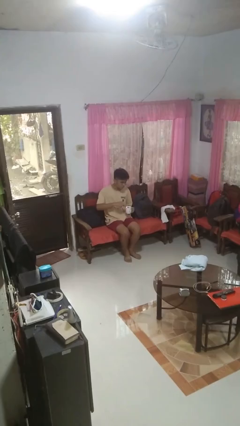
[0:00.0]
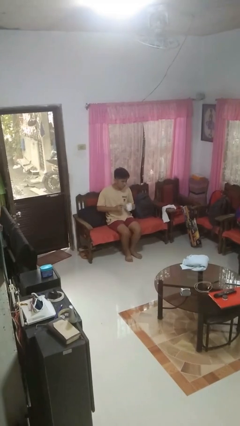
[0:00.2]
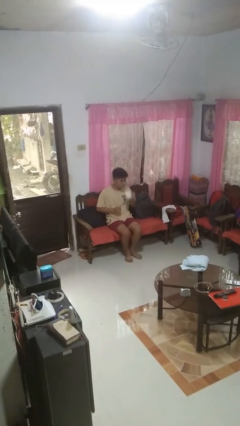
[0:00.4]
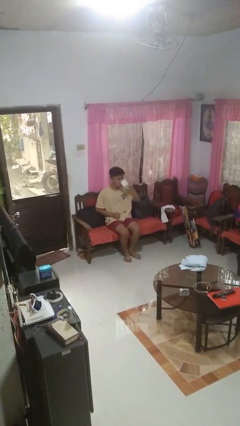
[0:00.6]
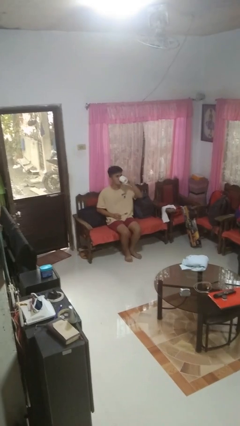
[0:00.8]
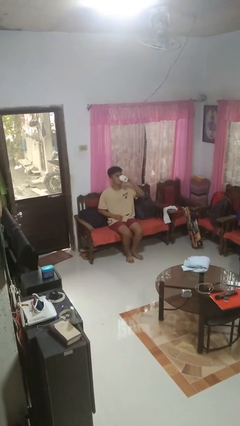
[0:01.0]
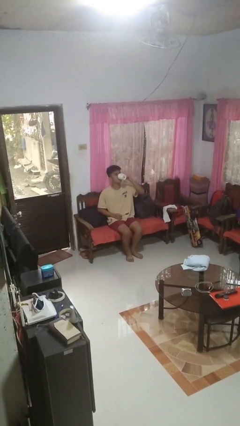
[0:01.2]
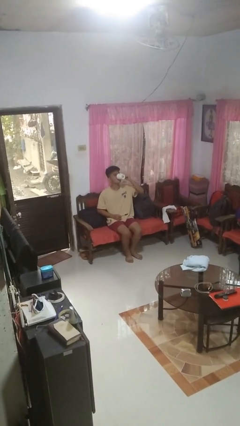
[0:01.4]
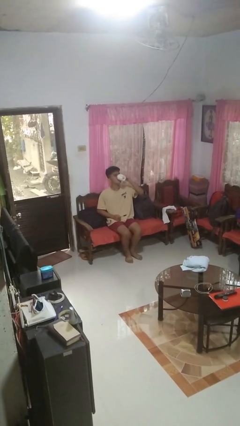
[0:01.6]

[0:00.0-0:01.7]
person drinks from mug

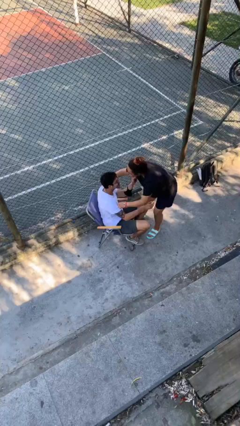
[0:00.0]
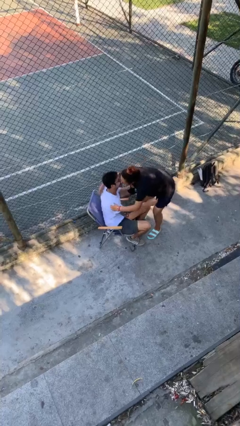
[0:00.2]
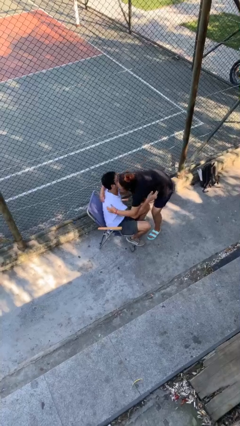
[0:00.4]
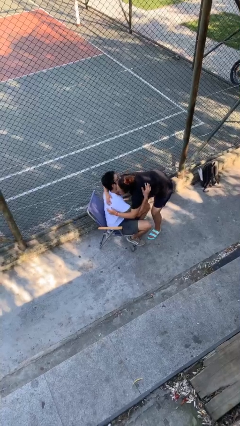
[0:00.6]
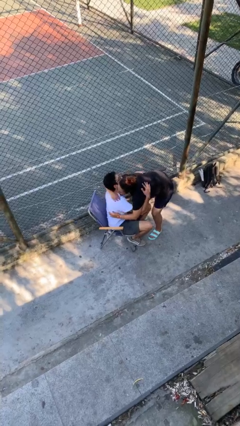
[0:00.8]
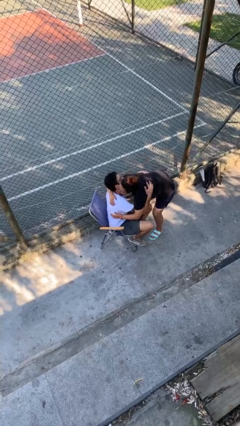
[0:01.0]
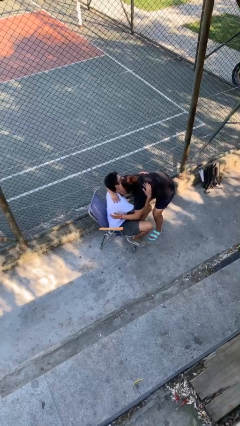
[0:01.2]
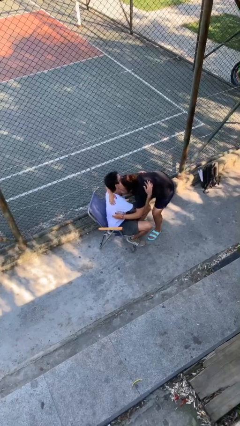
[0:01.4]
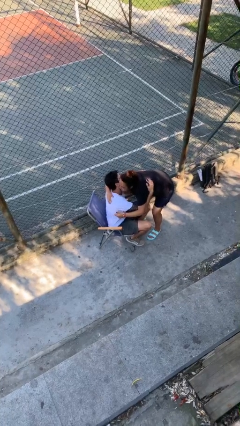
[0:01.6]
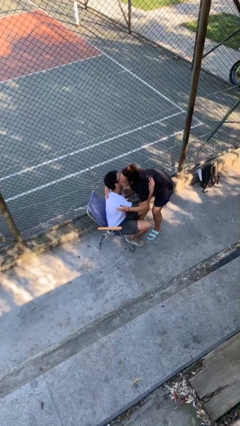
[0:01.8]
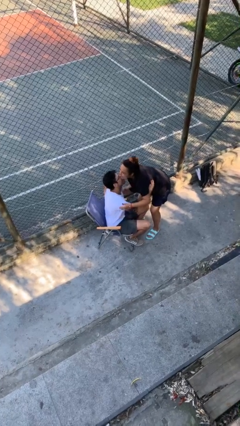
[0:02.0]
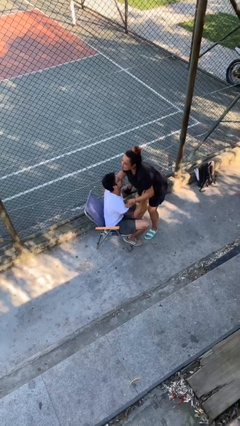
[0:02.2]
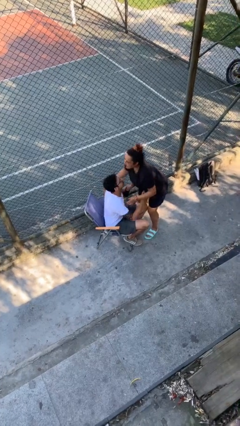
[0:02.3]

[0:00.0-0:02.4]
person embraces person

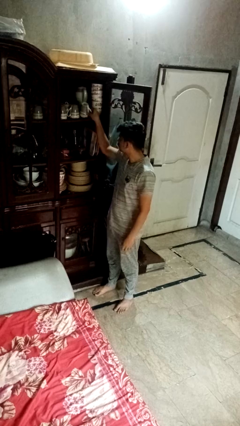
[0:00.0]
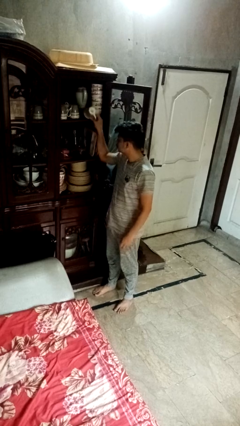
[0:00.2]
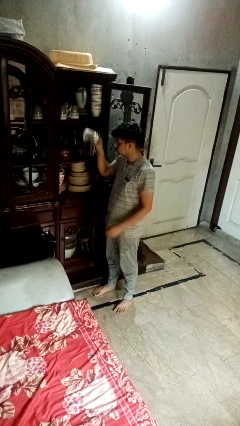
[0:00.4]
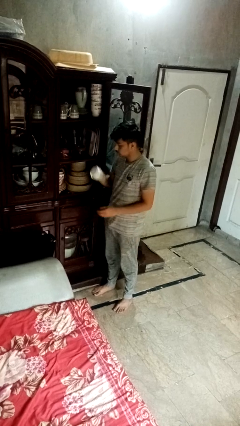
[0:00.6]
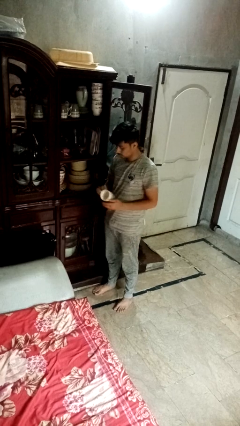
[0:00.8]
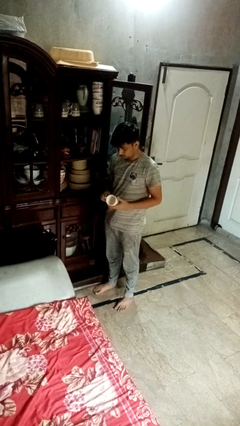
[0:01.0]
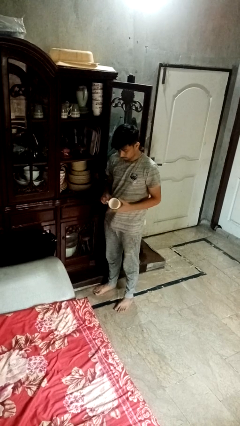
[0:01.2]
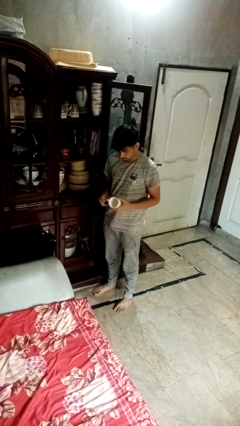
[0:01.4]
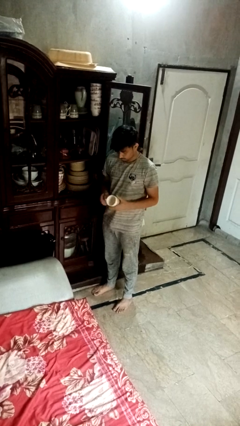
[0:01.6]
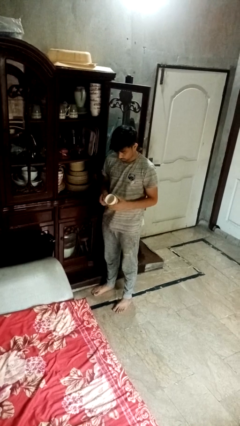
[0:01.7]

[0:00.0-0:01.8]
person takes object from cabinet

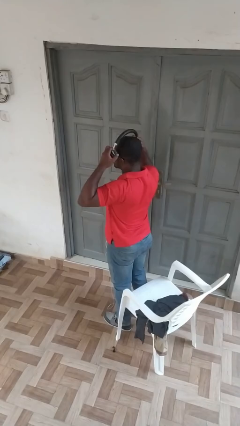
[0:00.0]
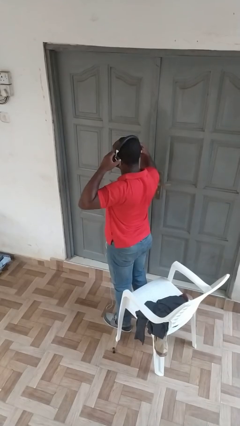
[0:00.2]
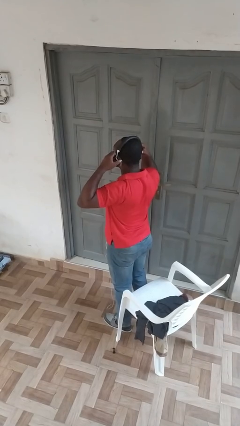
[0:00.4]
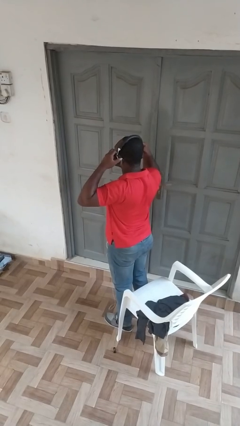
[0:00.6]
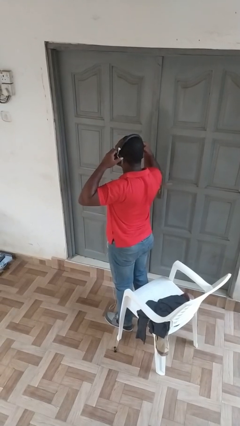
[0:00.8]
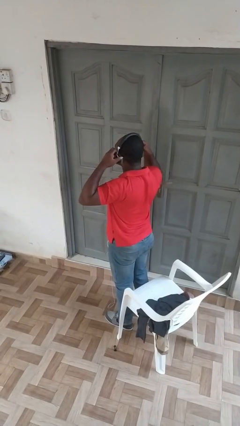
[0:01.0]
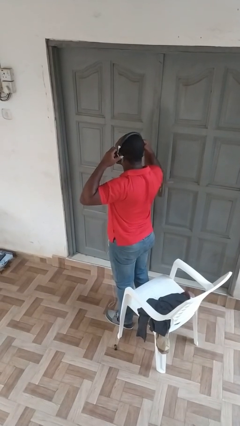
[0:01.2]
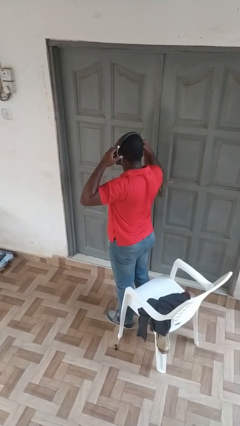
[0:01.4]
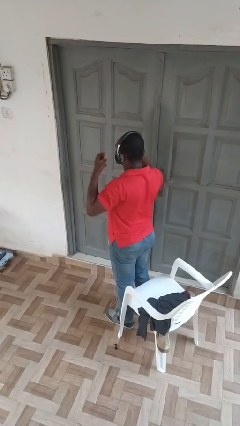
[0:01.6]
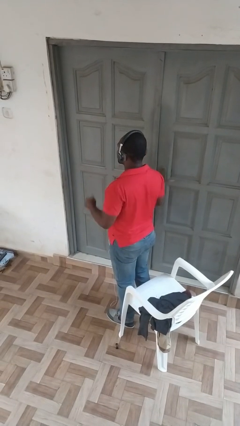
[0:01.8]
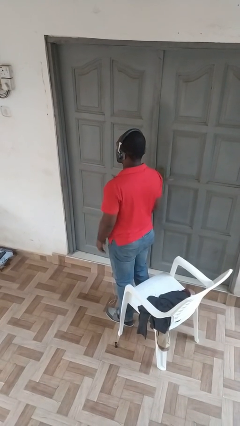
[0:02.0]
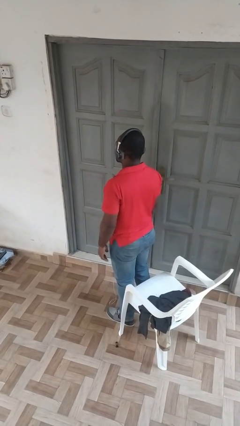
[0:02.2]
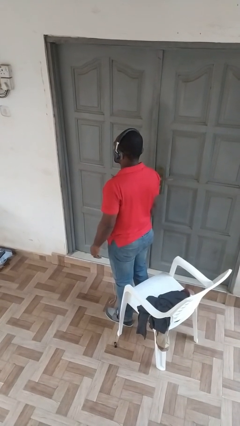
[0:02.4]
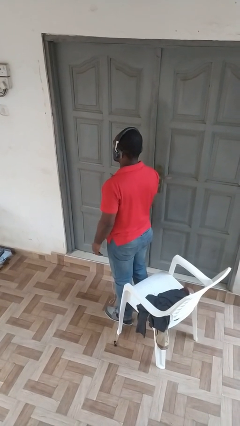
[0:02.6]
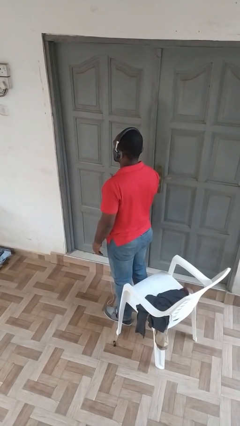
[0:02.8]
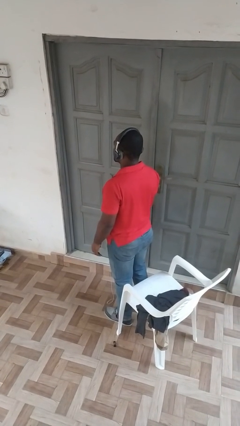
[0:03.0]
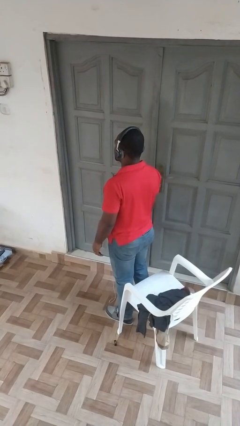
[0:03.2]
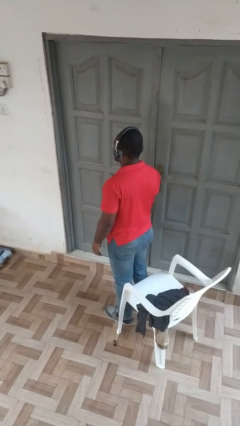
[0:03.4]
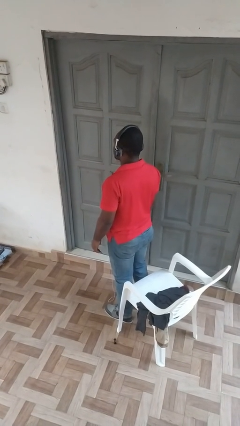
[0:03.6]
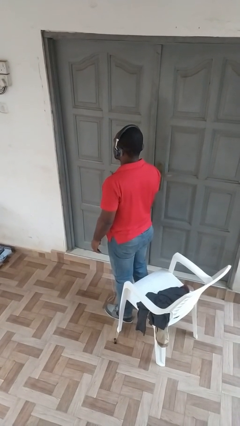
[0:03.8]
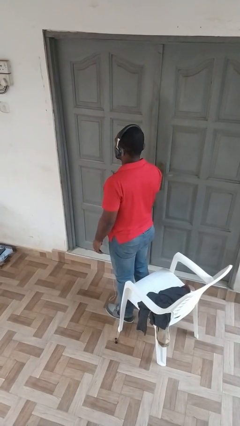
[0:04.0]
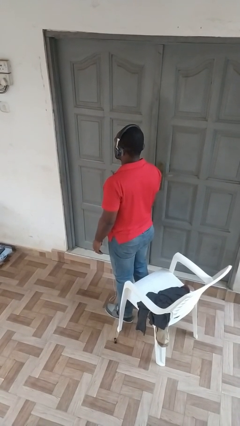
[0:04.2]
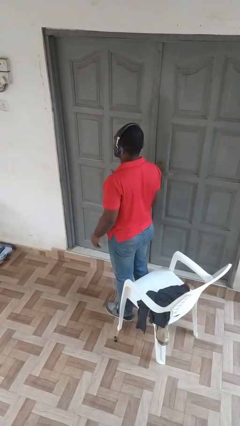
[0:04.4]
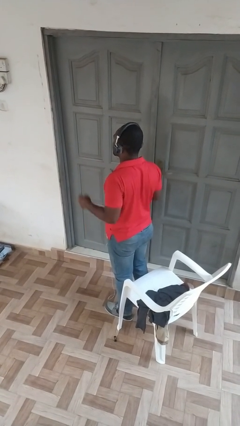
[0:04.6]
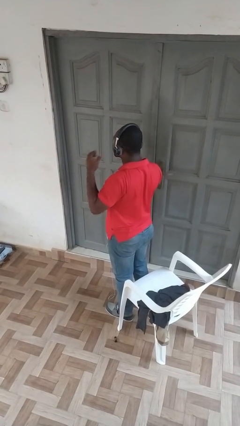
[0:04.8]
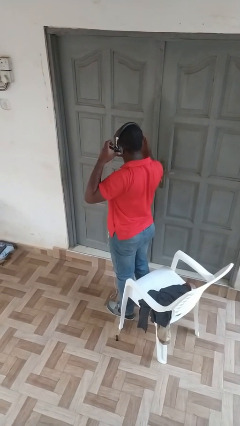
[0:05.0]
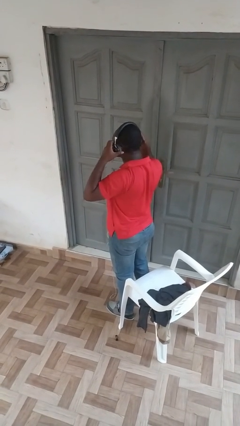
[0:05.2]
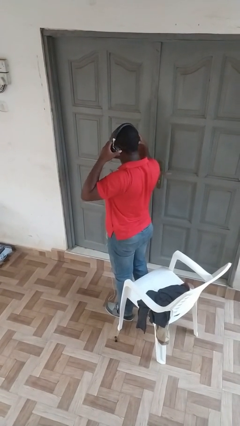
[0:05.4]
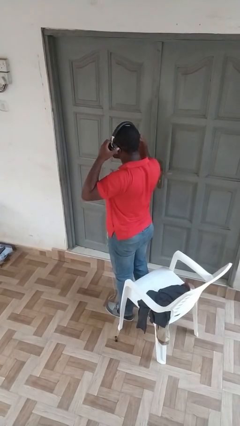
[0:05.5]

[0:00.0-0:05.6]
person puts on headphones

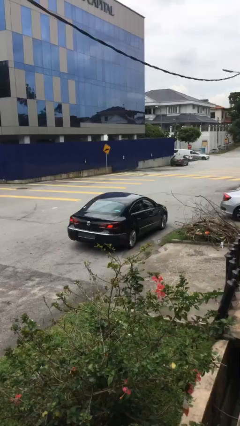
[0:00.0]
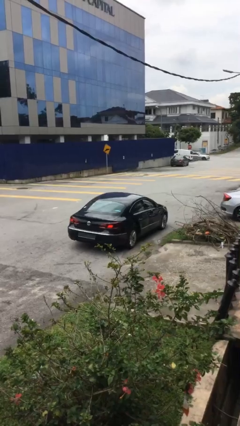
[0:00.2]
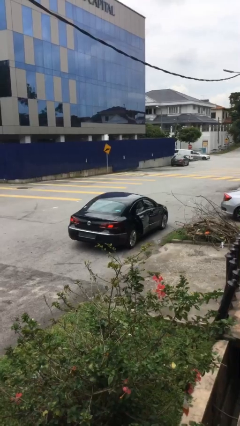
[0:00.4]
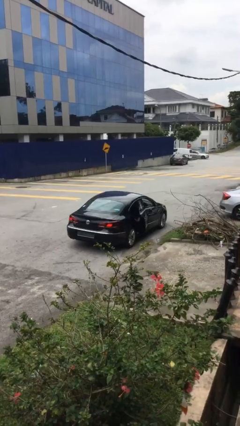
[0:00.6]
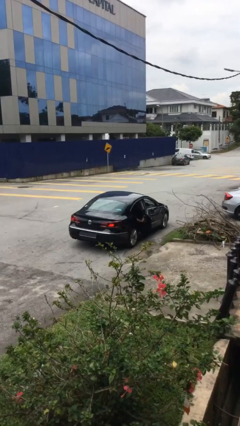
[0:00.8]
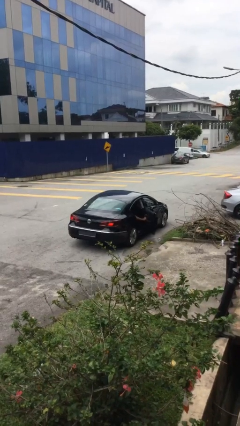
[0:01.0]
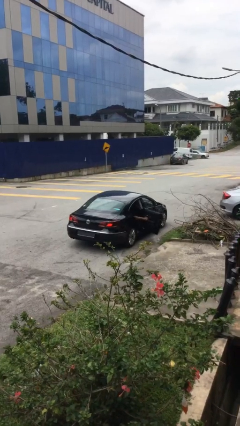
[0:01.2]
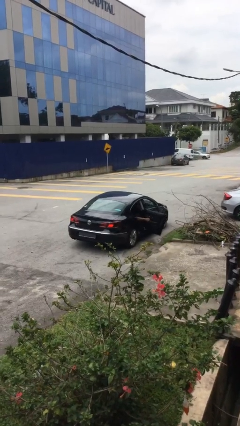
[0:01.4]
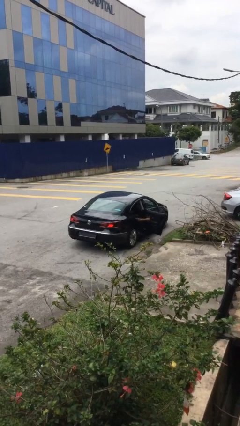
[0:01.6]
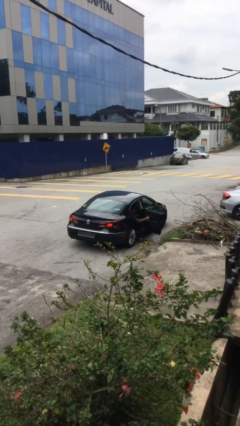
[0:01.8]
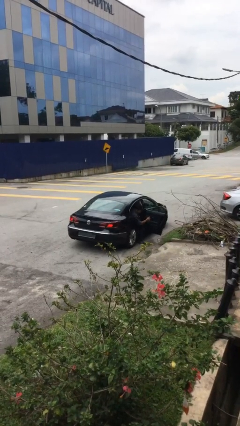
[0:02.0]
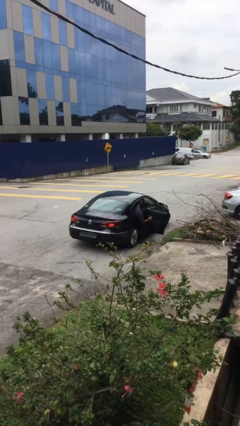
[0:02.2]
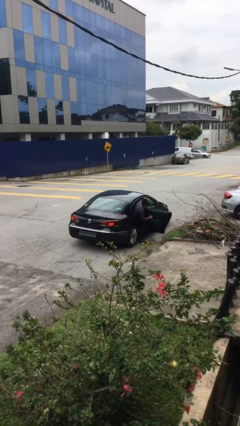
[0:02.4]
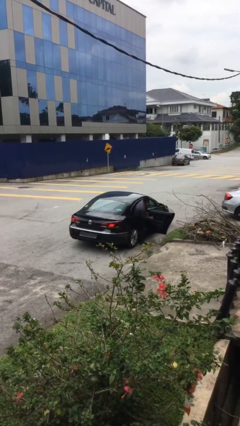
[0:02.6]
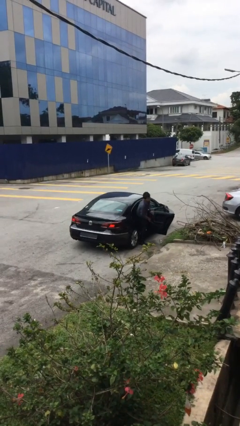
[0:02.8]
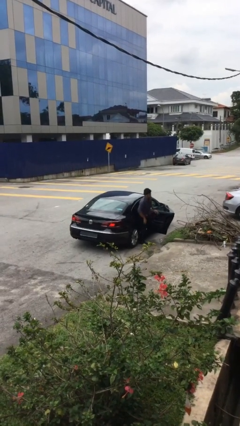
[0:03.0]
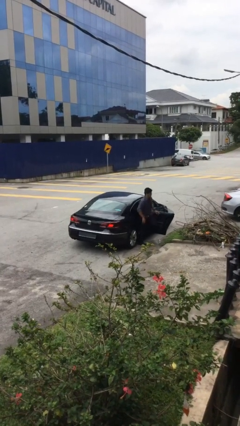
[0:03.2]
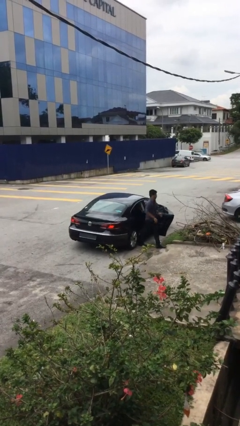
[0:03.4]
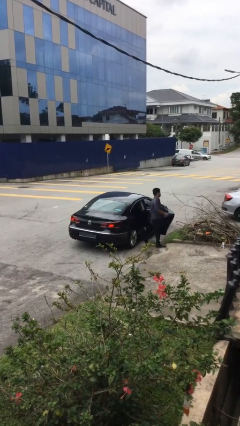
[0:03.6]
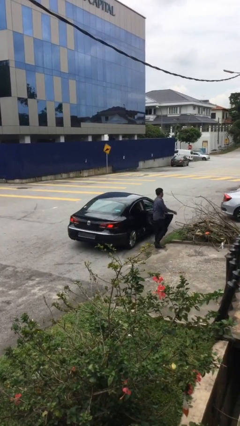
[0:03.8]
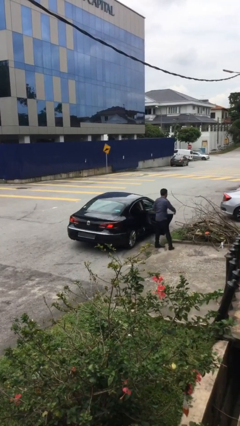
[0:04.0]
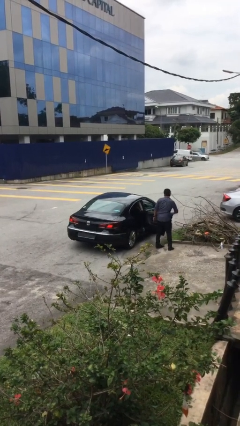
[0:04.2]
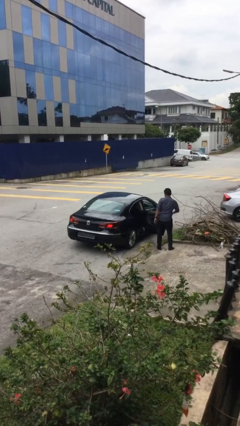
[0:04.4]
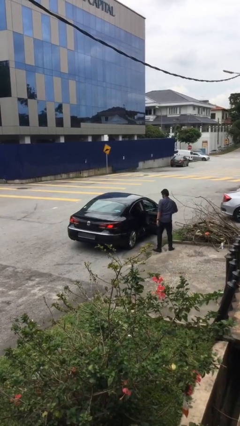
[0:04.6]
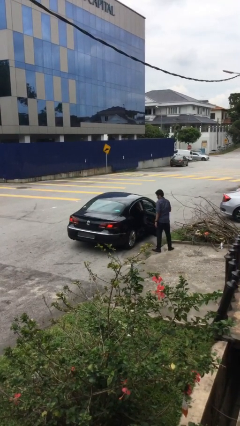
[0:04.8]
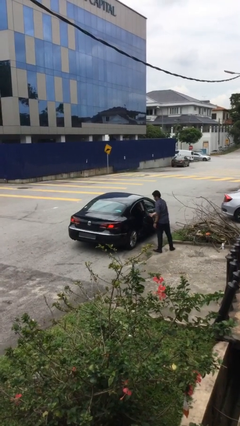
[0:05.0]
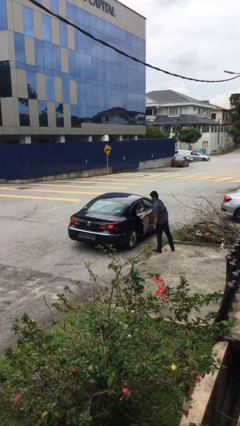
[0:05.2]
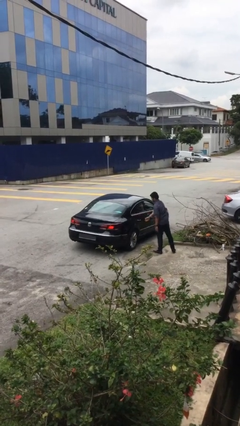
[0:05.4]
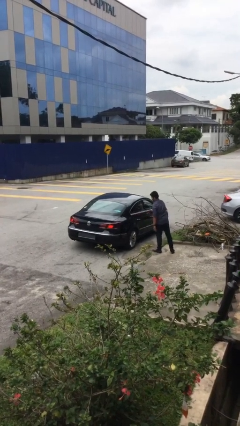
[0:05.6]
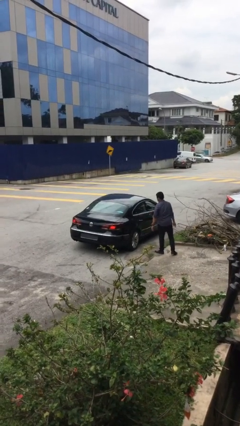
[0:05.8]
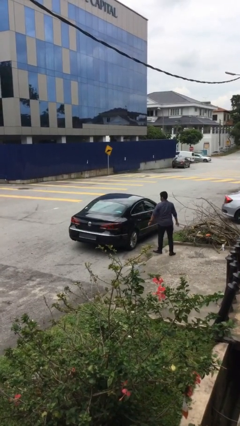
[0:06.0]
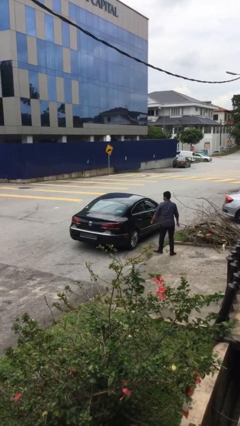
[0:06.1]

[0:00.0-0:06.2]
car drops off person

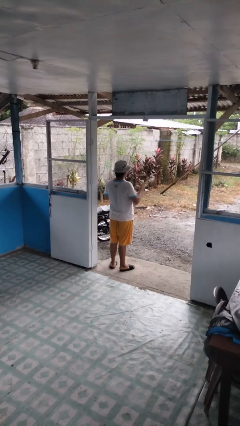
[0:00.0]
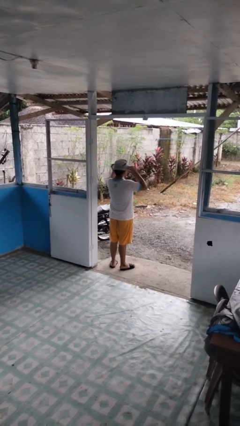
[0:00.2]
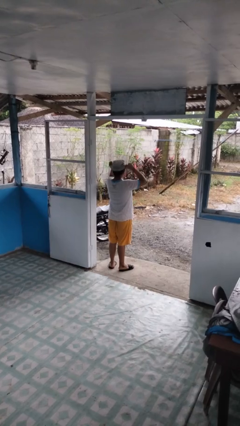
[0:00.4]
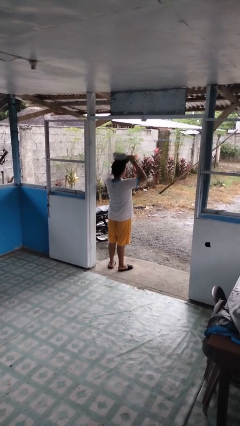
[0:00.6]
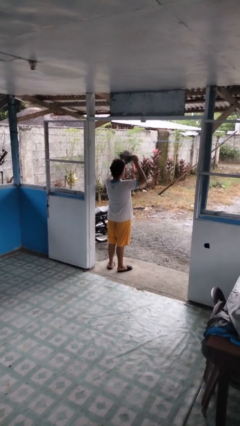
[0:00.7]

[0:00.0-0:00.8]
person takes off hat
